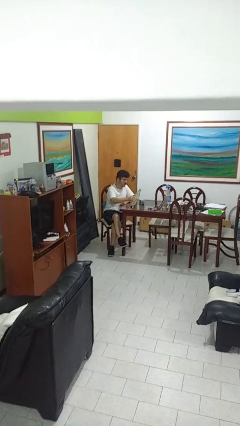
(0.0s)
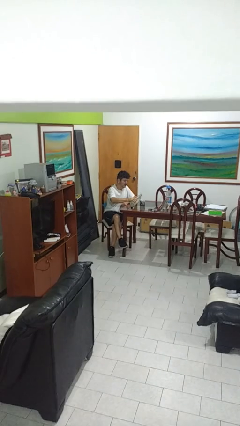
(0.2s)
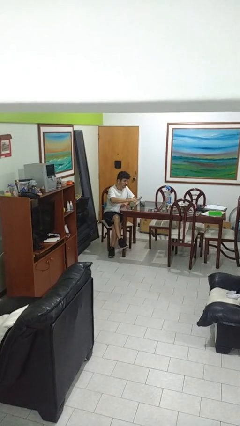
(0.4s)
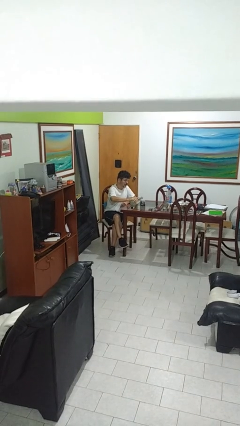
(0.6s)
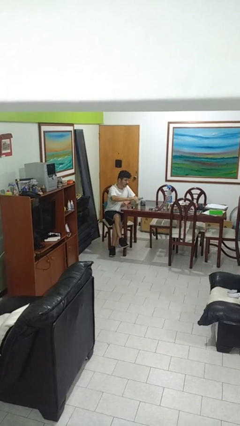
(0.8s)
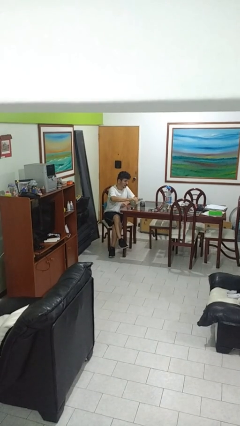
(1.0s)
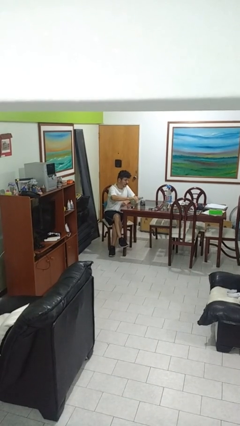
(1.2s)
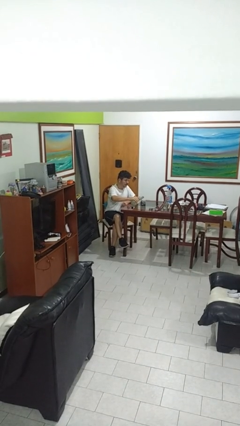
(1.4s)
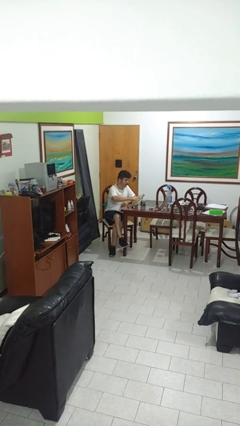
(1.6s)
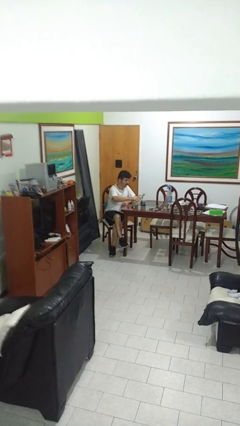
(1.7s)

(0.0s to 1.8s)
person pours liquid into cup

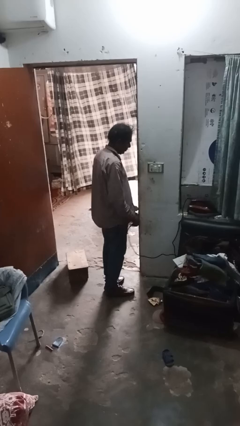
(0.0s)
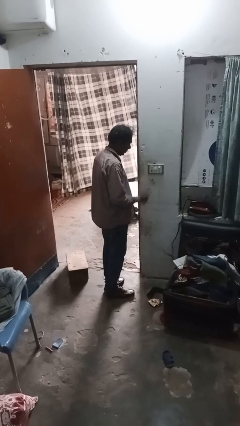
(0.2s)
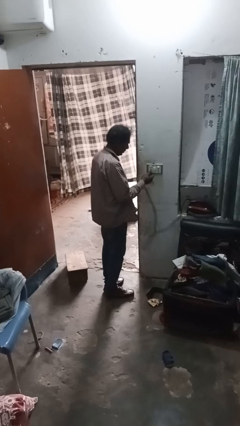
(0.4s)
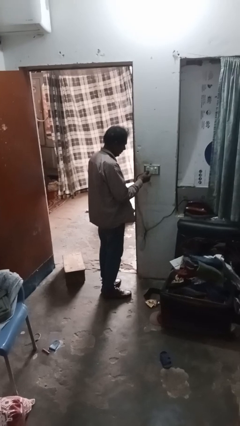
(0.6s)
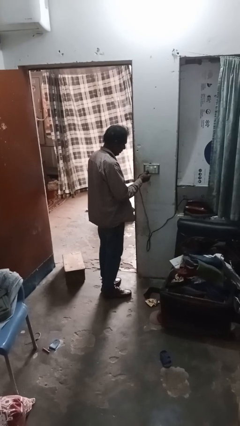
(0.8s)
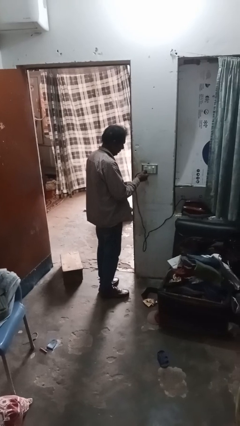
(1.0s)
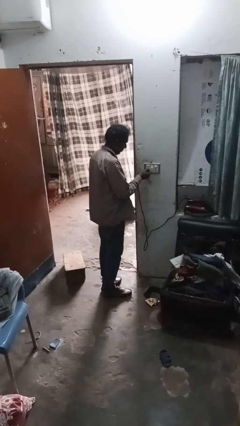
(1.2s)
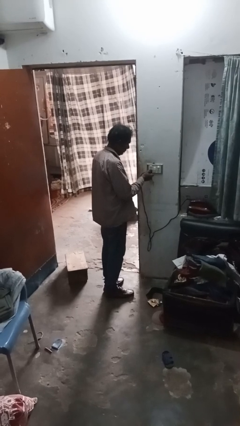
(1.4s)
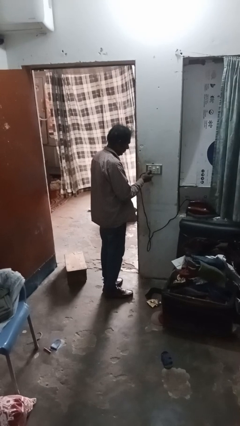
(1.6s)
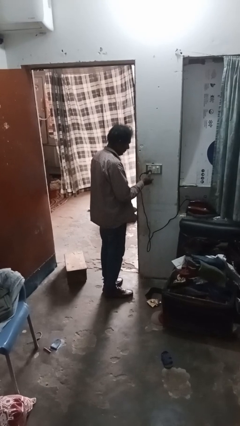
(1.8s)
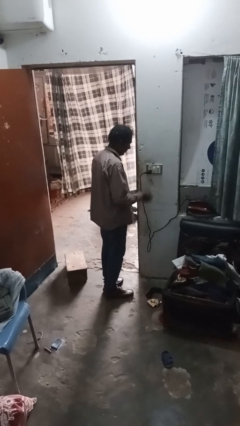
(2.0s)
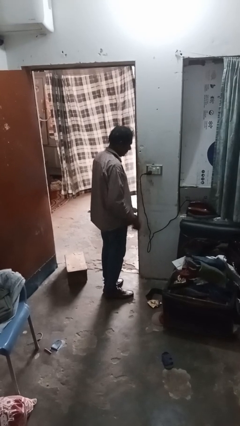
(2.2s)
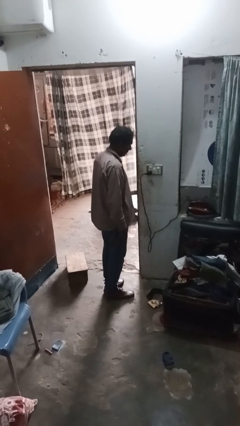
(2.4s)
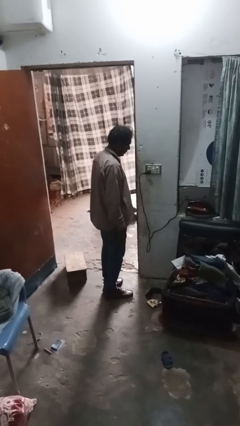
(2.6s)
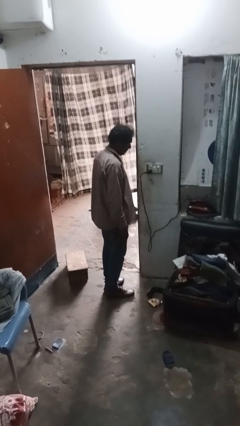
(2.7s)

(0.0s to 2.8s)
person plugs into electrical socket

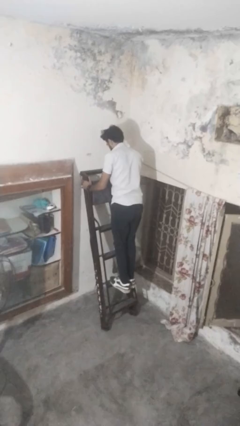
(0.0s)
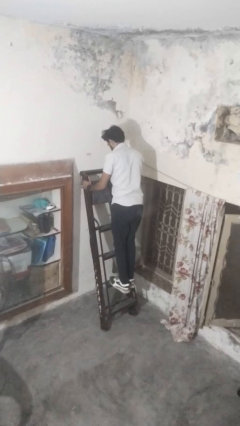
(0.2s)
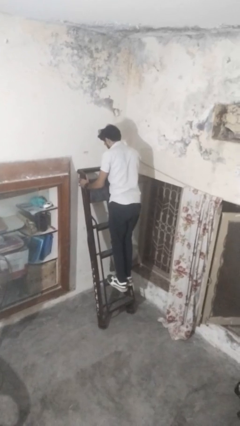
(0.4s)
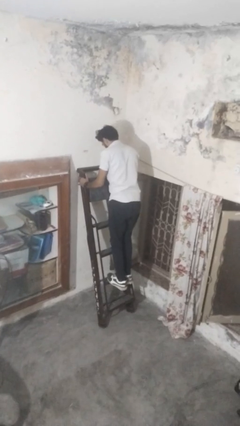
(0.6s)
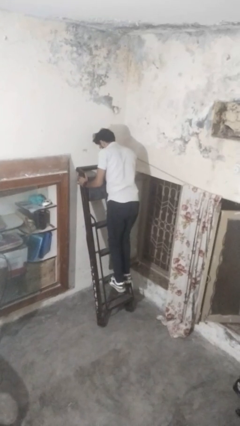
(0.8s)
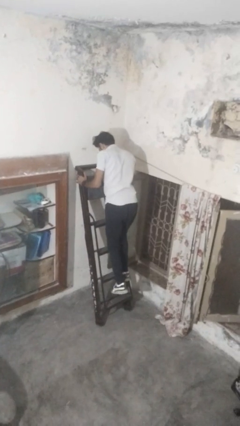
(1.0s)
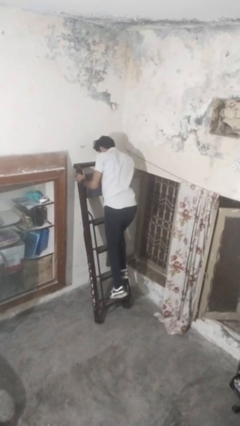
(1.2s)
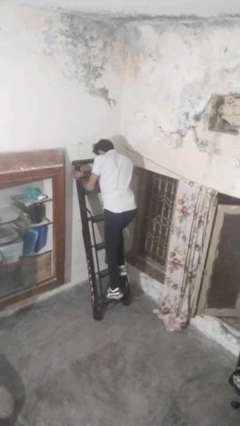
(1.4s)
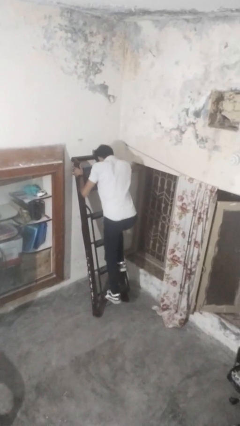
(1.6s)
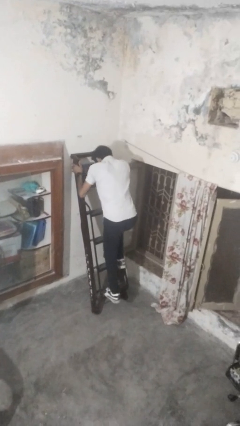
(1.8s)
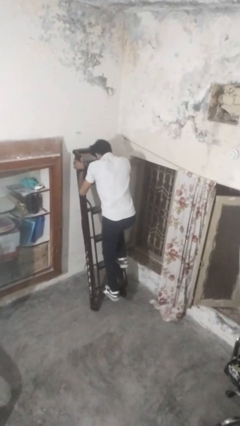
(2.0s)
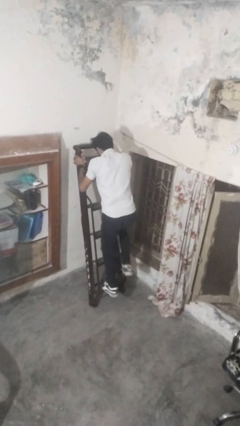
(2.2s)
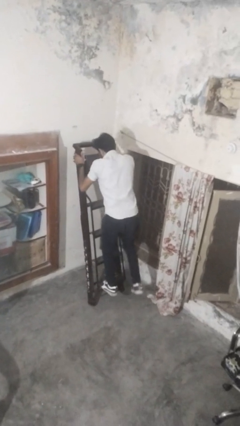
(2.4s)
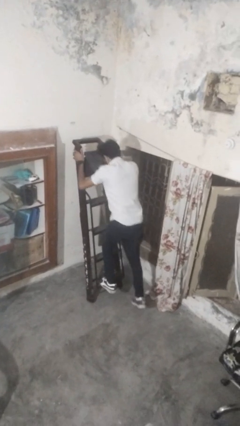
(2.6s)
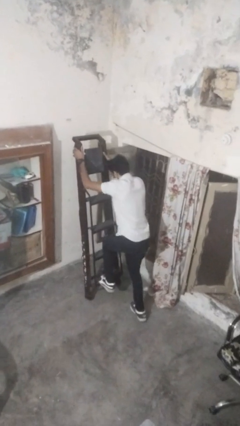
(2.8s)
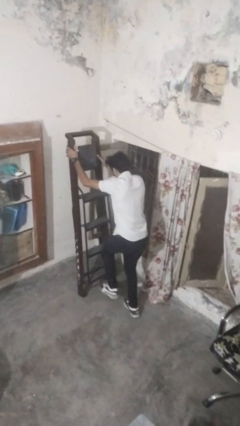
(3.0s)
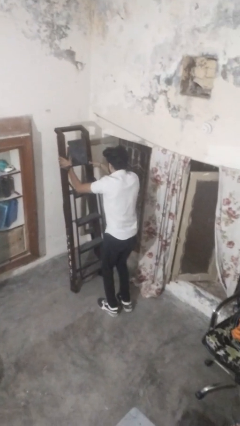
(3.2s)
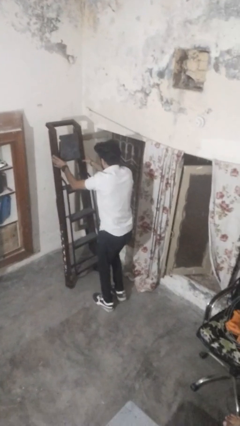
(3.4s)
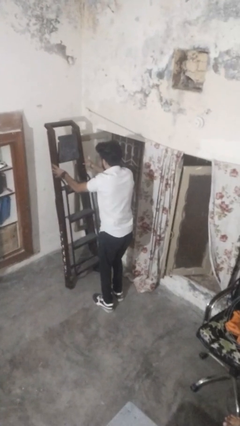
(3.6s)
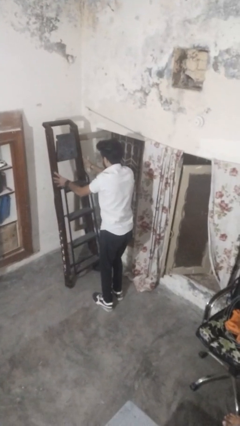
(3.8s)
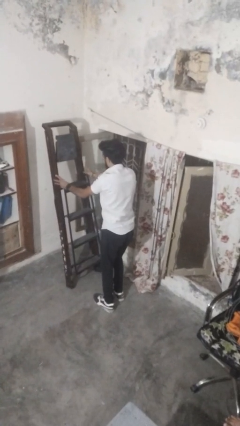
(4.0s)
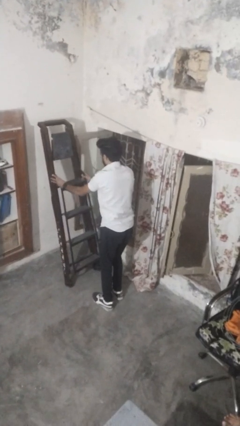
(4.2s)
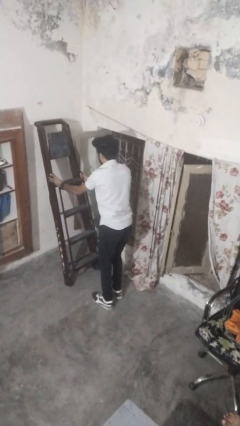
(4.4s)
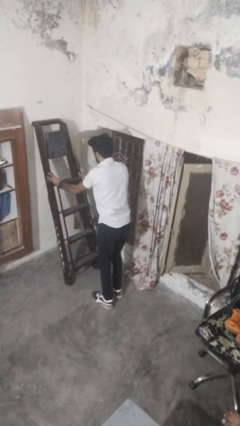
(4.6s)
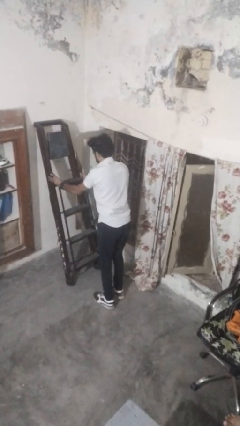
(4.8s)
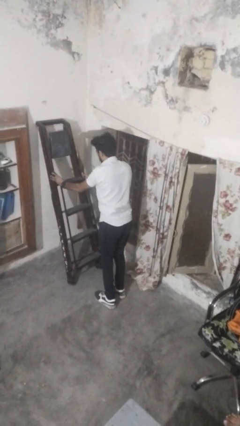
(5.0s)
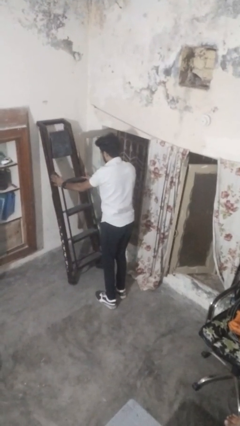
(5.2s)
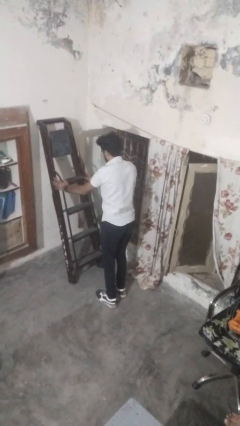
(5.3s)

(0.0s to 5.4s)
person climbs down ladder

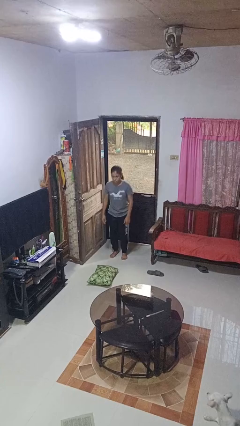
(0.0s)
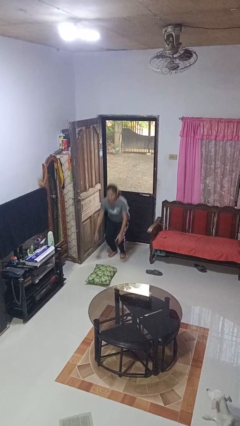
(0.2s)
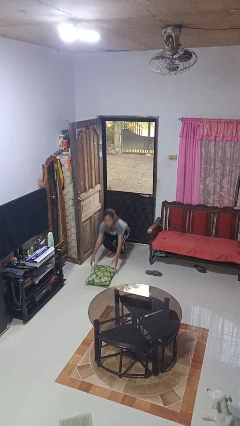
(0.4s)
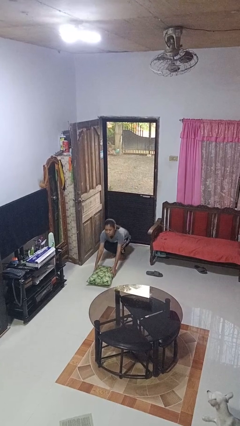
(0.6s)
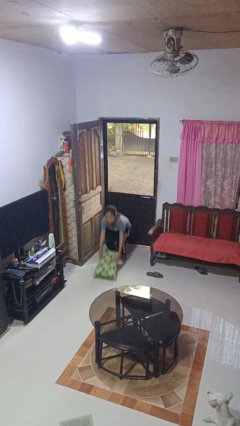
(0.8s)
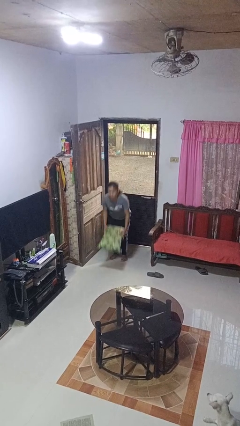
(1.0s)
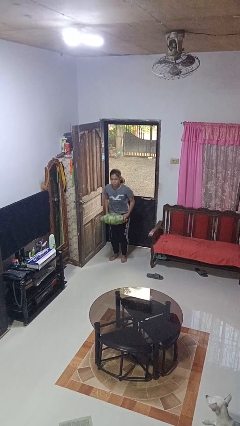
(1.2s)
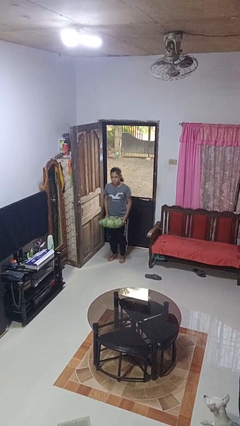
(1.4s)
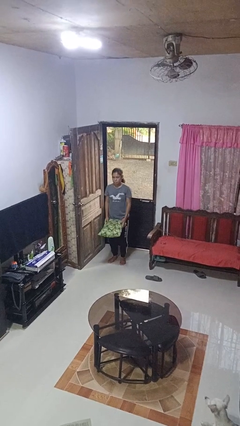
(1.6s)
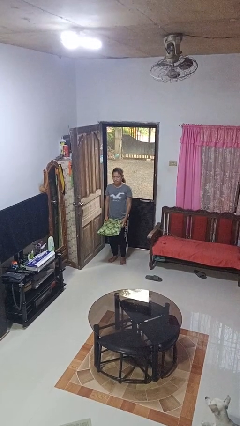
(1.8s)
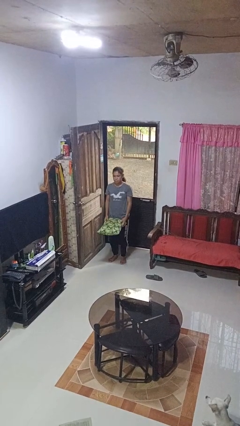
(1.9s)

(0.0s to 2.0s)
person picks up object from floor

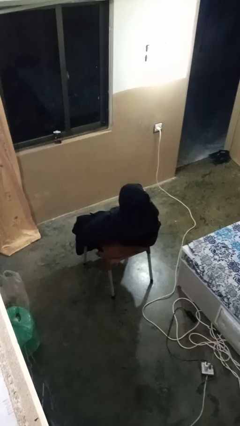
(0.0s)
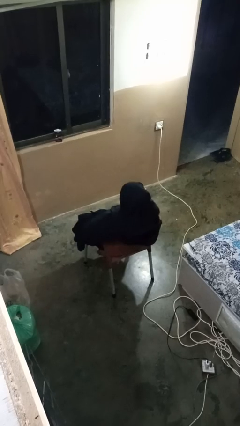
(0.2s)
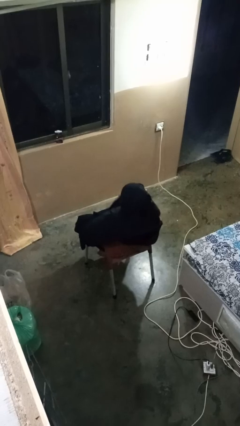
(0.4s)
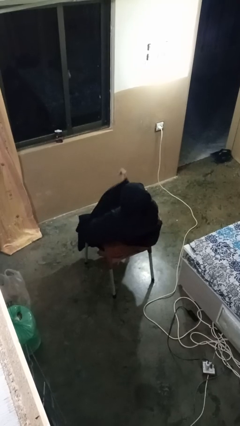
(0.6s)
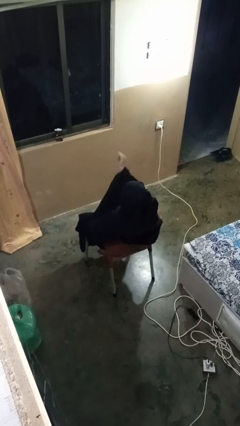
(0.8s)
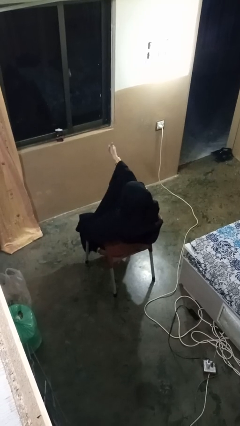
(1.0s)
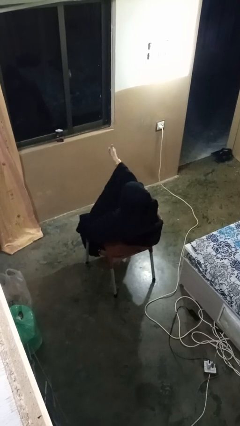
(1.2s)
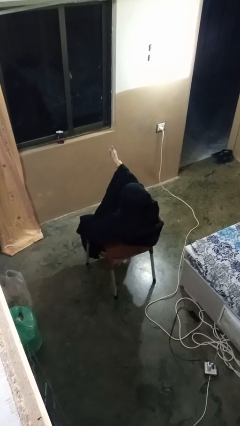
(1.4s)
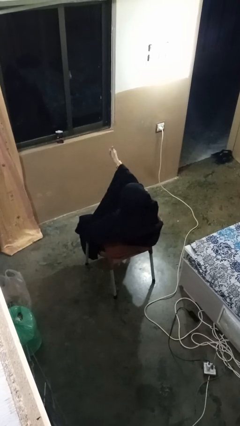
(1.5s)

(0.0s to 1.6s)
person gestures thumbs up

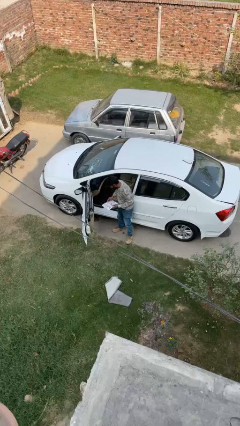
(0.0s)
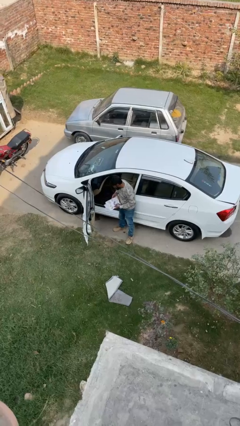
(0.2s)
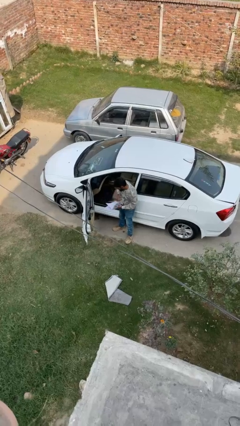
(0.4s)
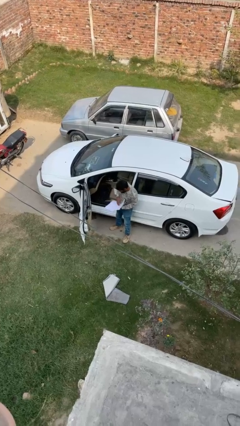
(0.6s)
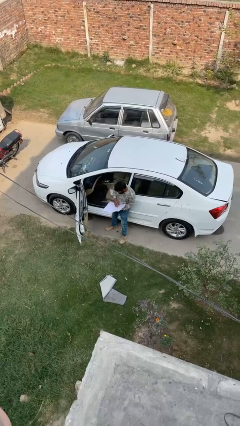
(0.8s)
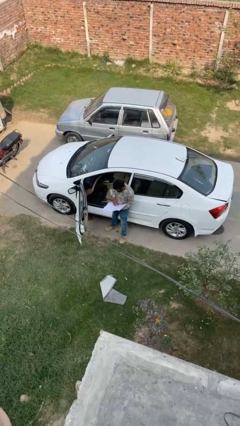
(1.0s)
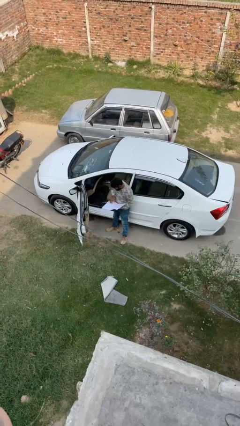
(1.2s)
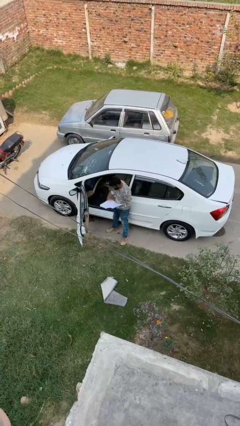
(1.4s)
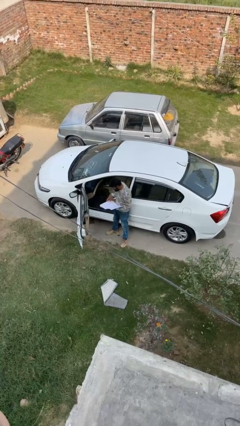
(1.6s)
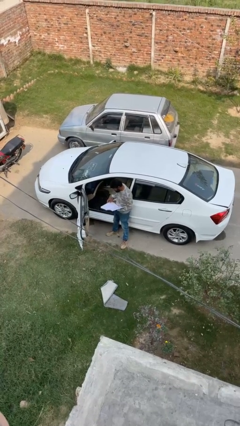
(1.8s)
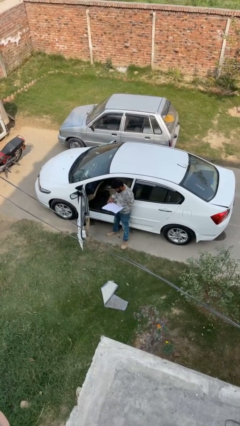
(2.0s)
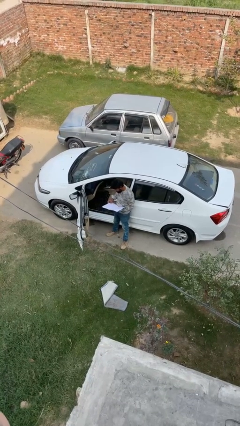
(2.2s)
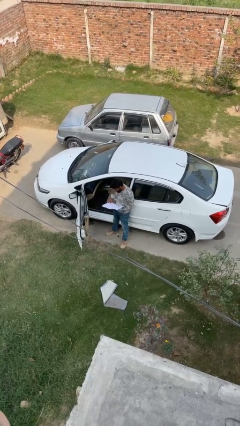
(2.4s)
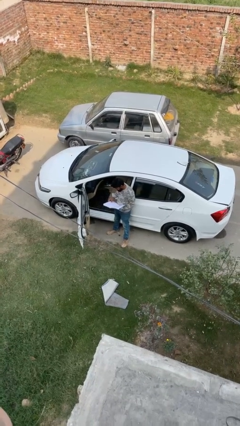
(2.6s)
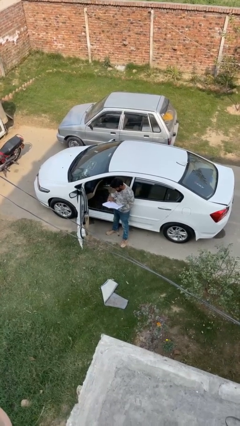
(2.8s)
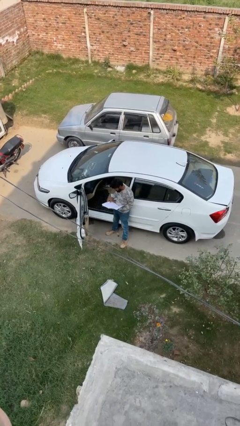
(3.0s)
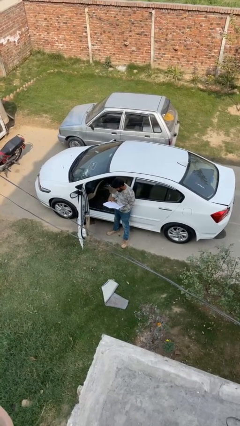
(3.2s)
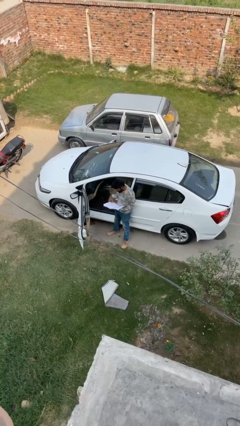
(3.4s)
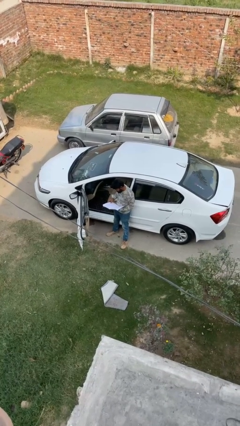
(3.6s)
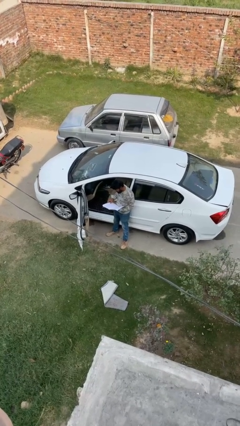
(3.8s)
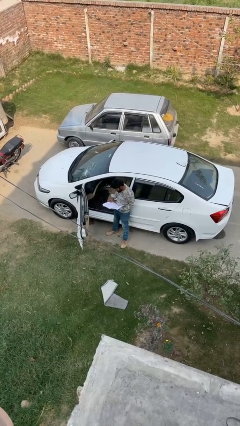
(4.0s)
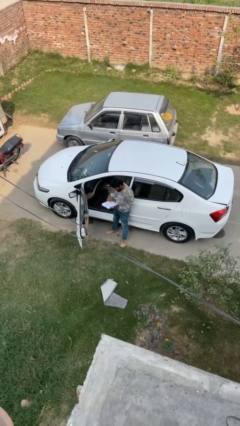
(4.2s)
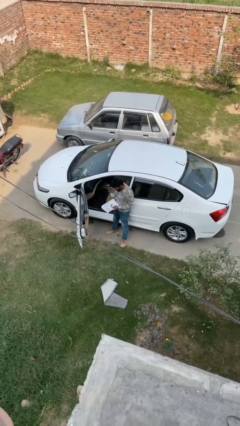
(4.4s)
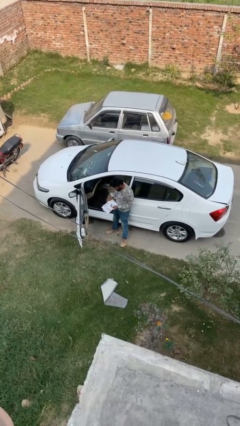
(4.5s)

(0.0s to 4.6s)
person reads document
